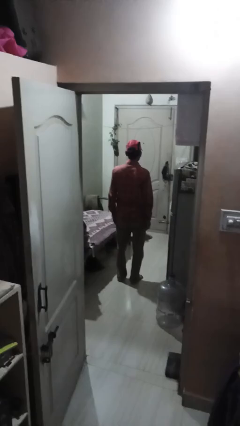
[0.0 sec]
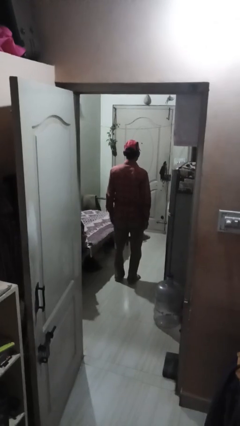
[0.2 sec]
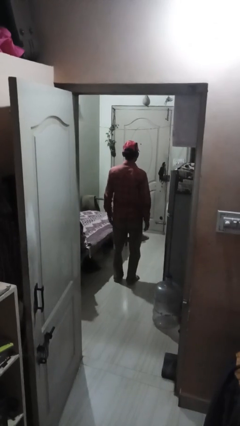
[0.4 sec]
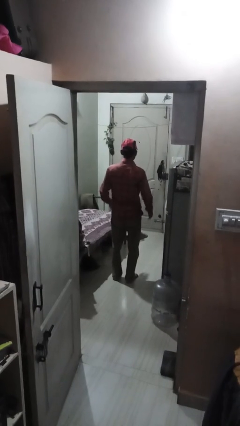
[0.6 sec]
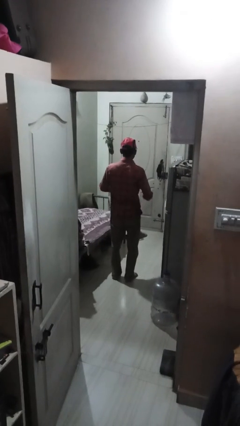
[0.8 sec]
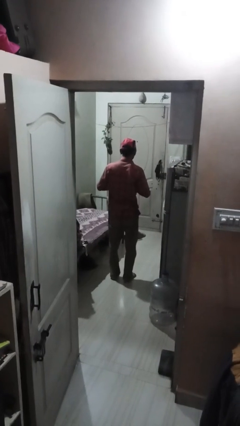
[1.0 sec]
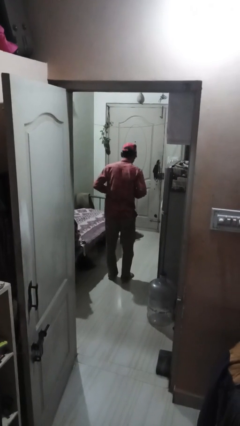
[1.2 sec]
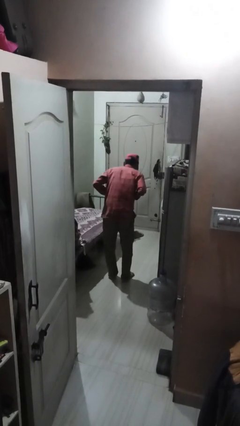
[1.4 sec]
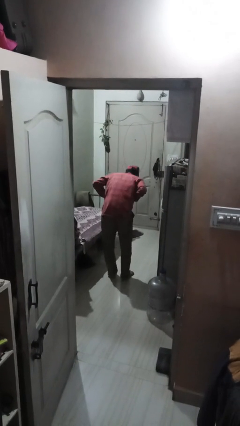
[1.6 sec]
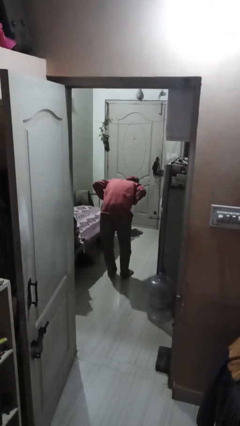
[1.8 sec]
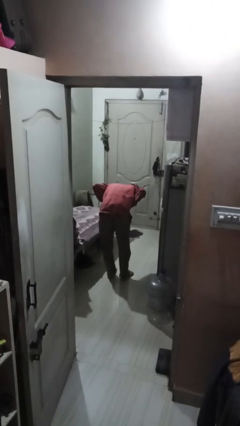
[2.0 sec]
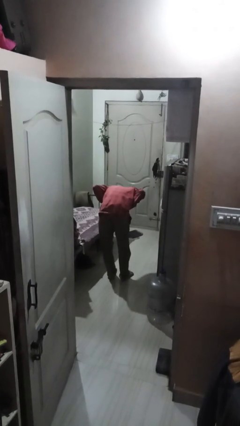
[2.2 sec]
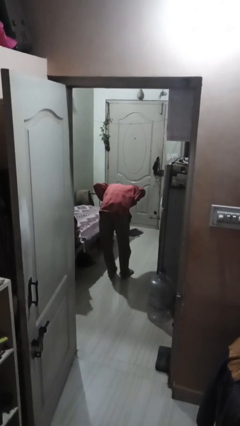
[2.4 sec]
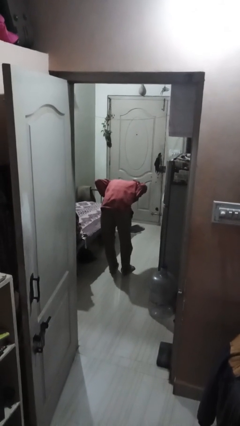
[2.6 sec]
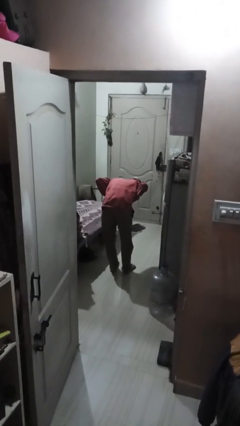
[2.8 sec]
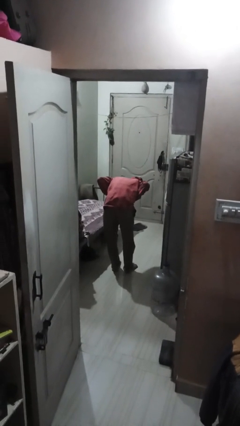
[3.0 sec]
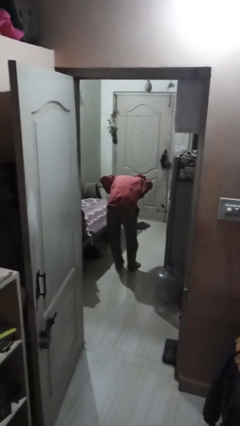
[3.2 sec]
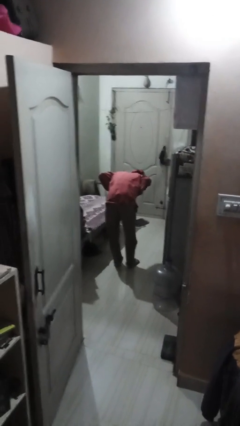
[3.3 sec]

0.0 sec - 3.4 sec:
person bows

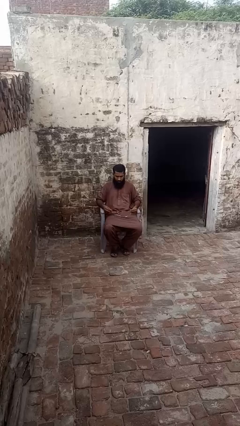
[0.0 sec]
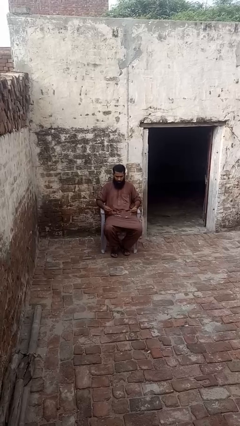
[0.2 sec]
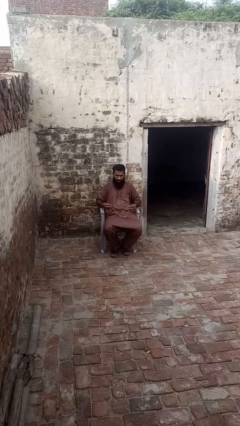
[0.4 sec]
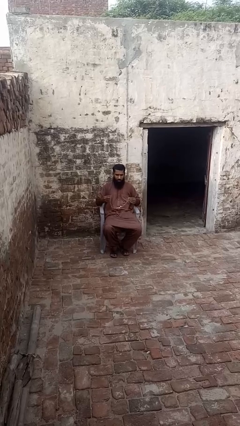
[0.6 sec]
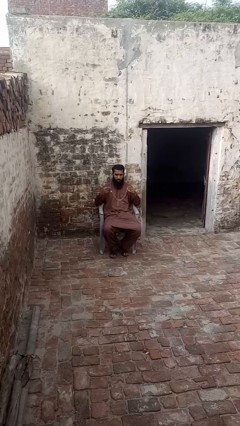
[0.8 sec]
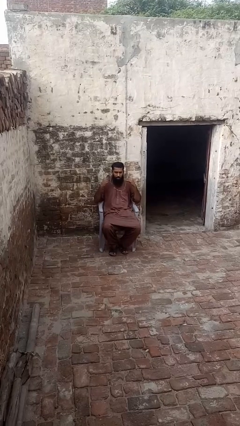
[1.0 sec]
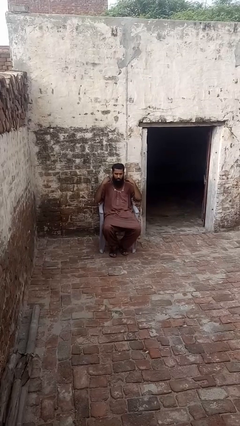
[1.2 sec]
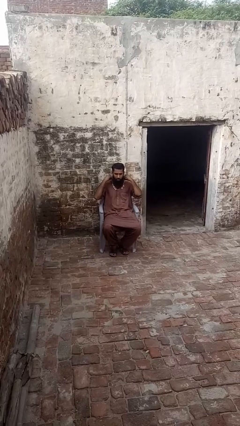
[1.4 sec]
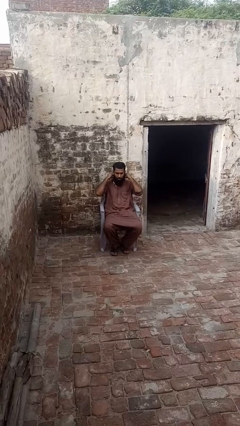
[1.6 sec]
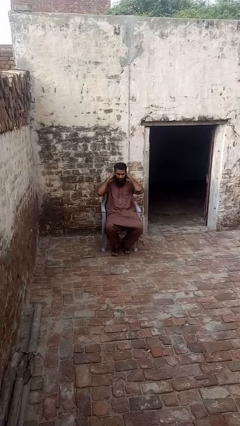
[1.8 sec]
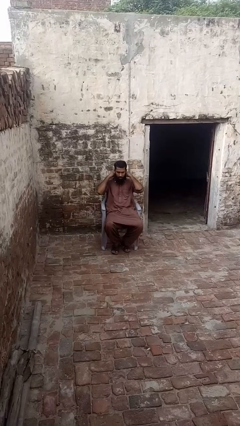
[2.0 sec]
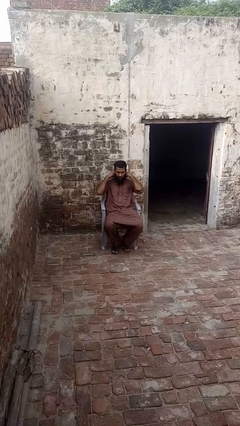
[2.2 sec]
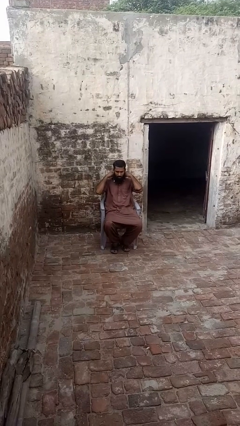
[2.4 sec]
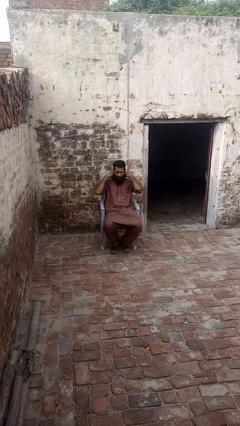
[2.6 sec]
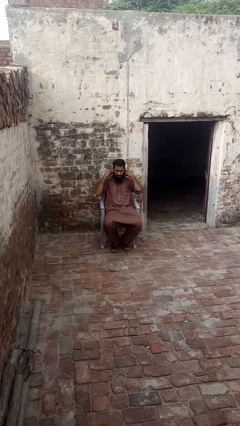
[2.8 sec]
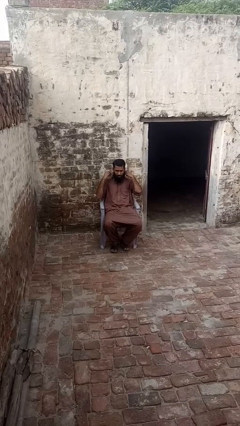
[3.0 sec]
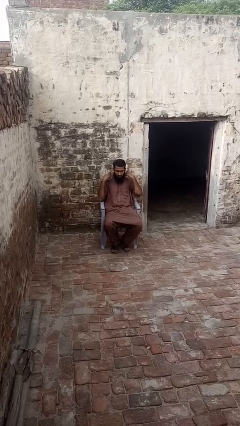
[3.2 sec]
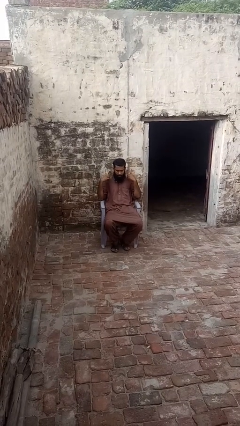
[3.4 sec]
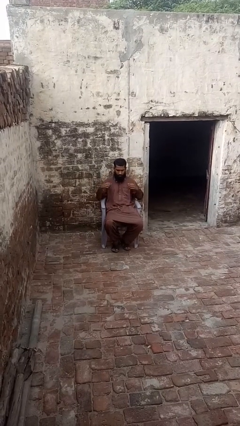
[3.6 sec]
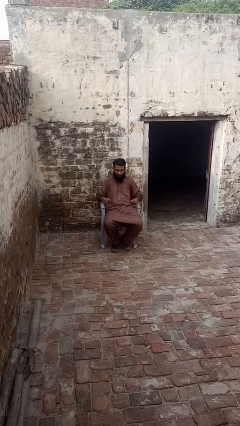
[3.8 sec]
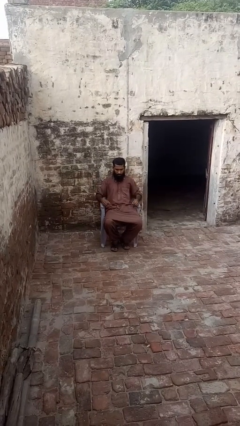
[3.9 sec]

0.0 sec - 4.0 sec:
person puts on necklace

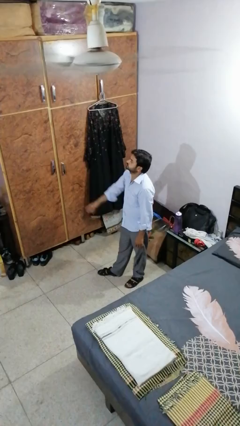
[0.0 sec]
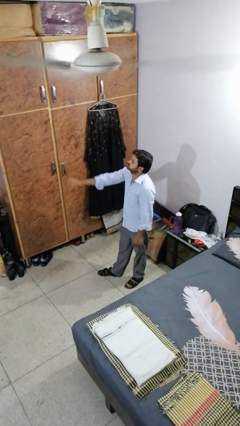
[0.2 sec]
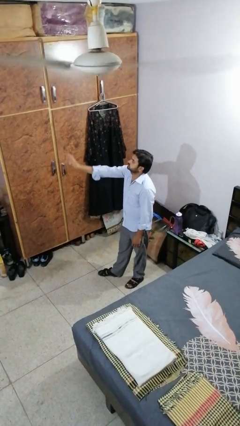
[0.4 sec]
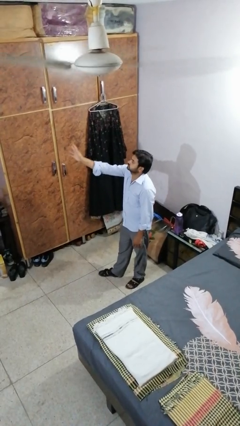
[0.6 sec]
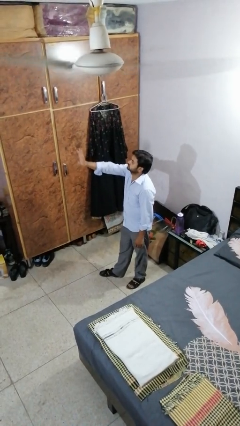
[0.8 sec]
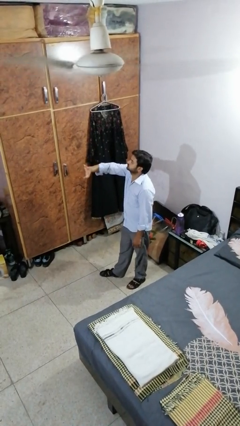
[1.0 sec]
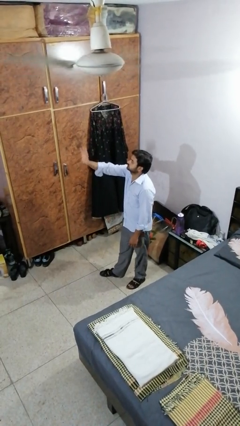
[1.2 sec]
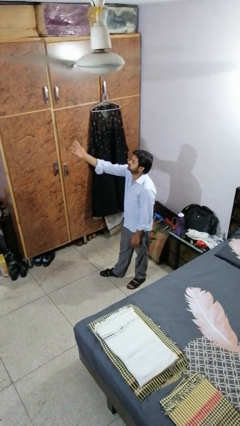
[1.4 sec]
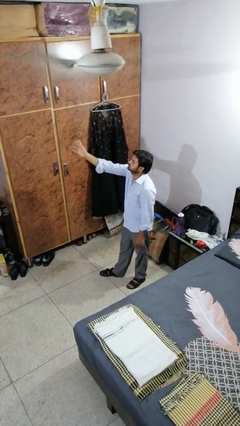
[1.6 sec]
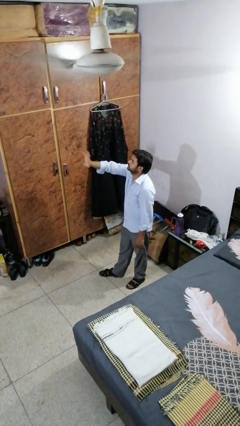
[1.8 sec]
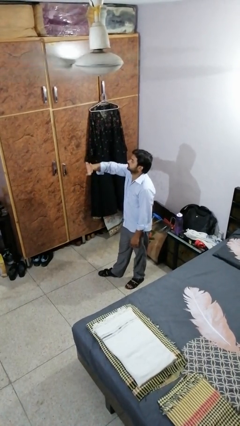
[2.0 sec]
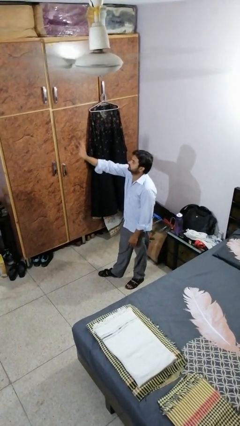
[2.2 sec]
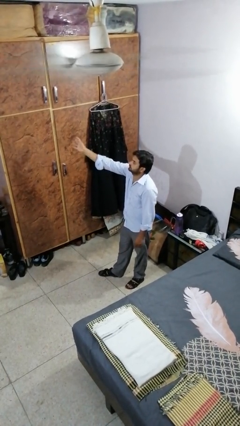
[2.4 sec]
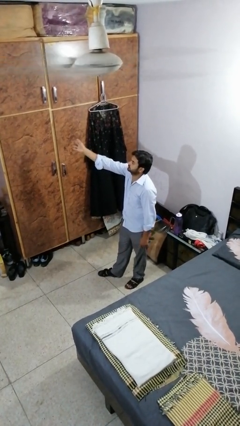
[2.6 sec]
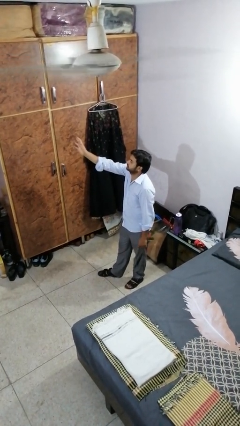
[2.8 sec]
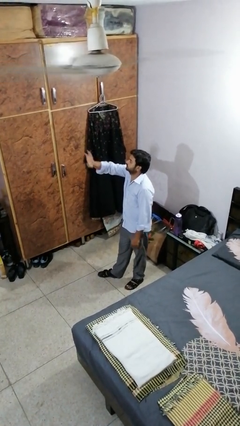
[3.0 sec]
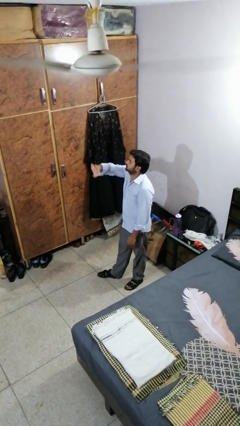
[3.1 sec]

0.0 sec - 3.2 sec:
person waves at person

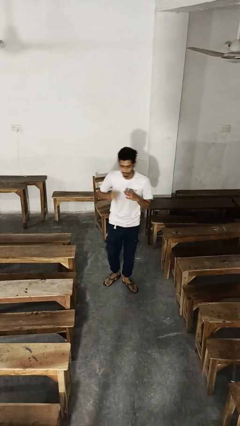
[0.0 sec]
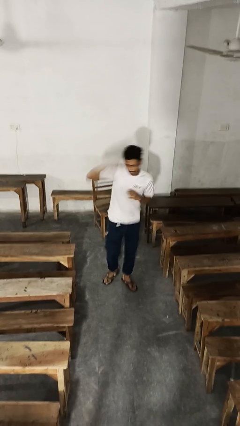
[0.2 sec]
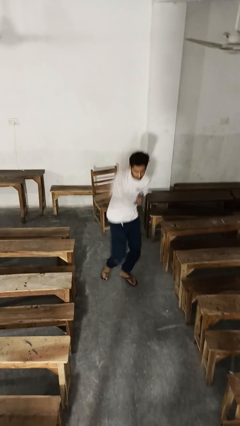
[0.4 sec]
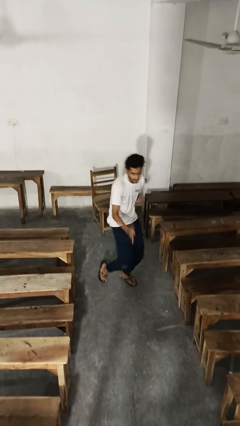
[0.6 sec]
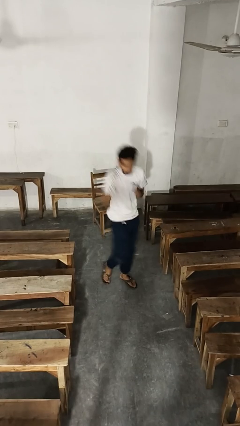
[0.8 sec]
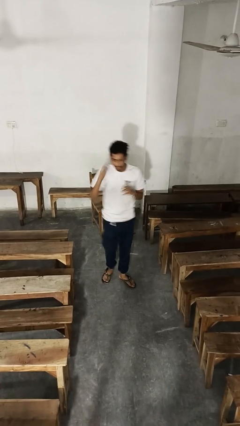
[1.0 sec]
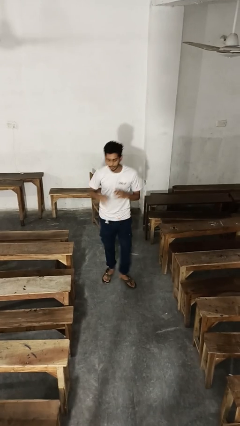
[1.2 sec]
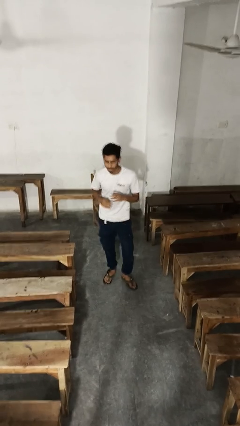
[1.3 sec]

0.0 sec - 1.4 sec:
person karate chop

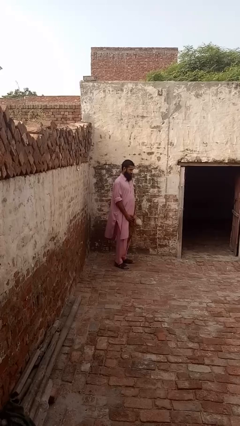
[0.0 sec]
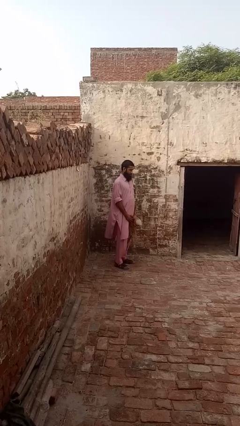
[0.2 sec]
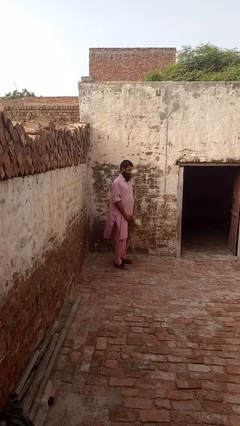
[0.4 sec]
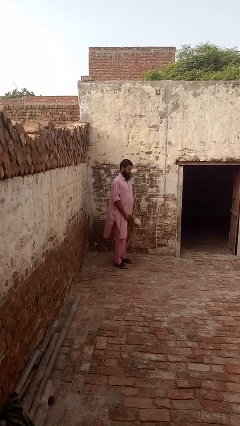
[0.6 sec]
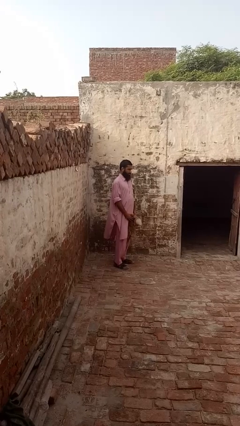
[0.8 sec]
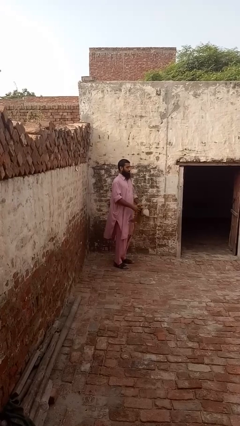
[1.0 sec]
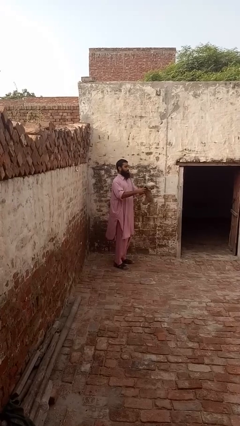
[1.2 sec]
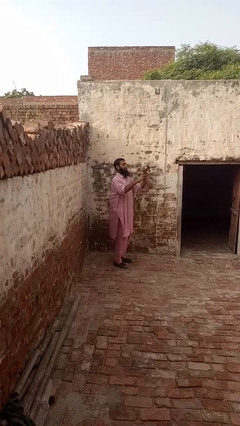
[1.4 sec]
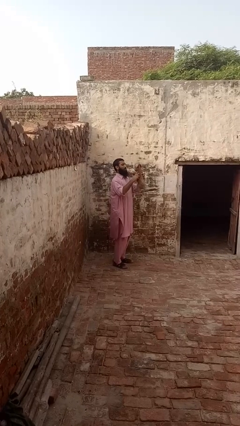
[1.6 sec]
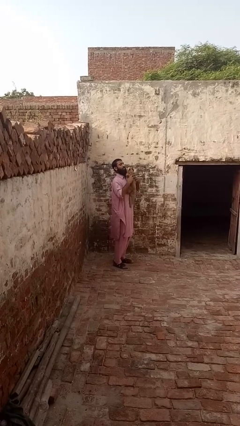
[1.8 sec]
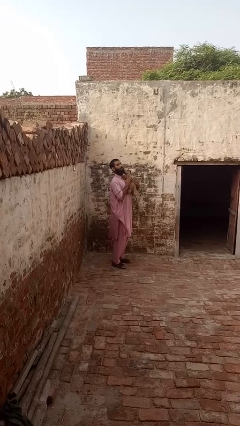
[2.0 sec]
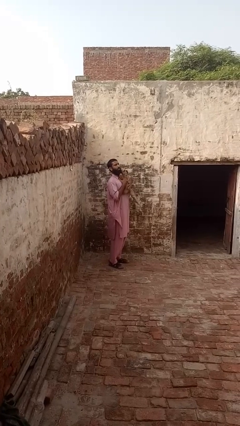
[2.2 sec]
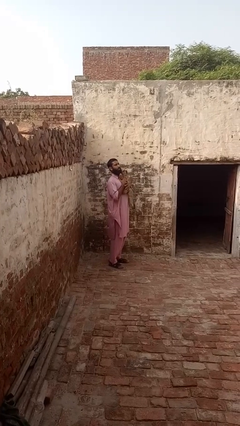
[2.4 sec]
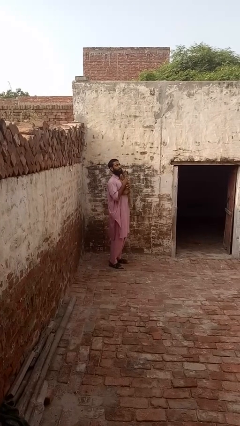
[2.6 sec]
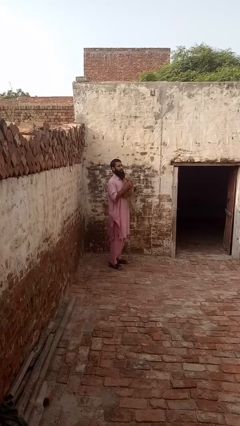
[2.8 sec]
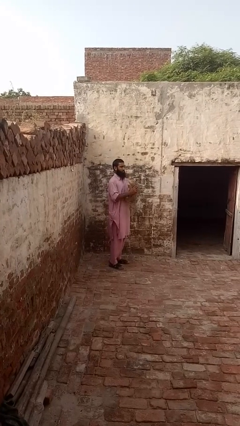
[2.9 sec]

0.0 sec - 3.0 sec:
person hugs stuffed animal

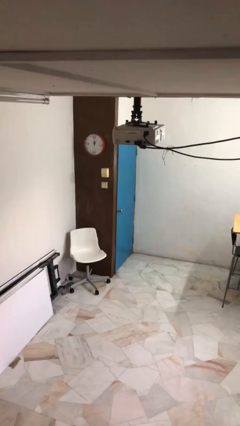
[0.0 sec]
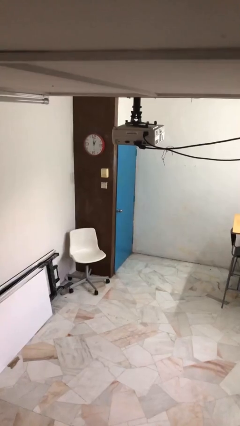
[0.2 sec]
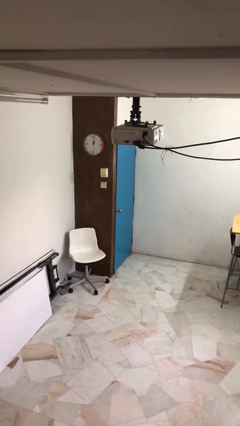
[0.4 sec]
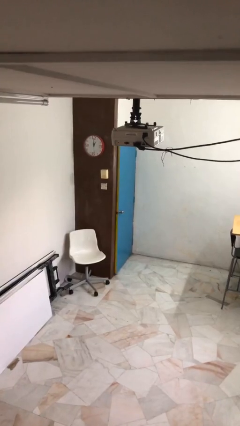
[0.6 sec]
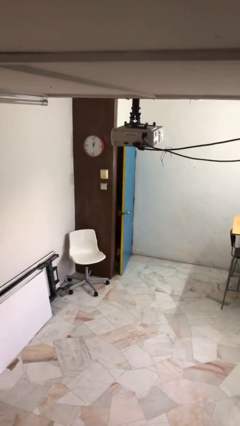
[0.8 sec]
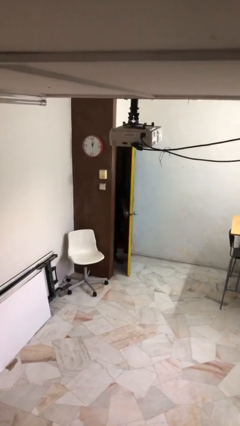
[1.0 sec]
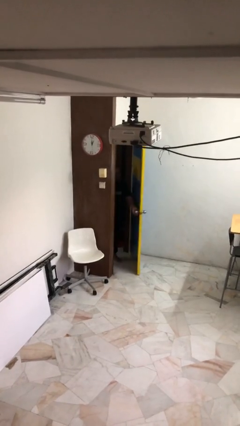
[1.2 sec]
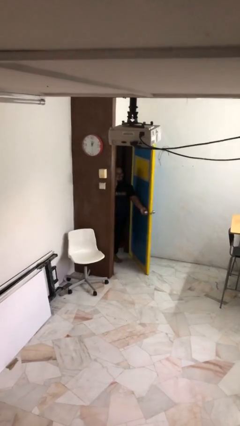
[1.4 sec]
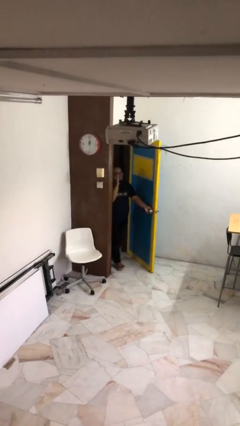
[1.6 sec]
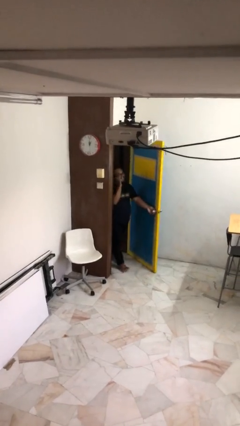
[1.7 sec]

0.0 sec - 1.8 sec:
person opens facility door
